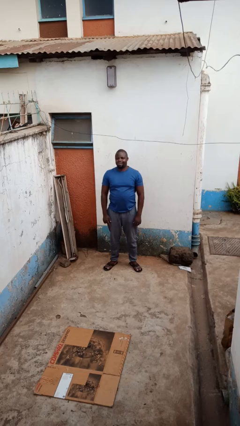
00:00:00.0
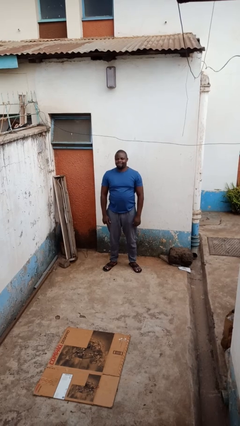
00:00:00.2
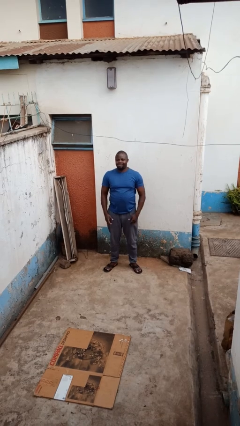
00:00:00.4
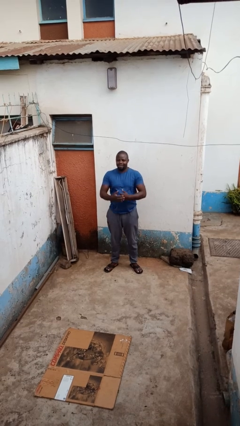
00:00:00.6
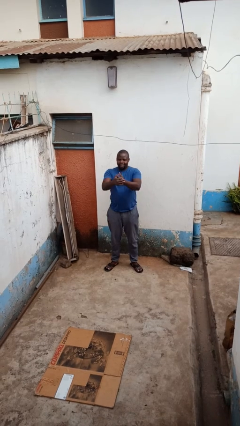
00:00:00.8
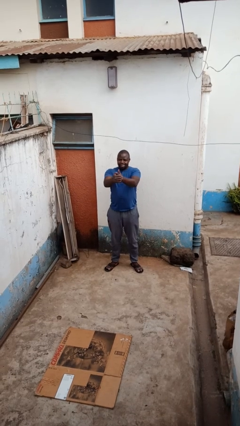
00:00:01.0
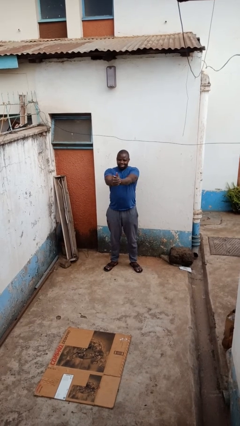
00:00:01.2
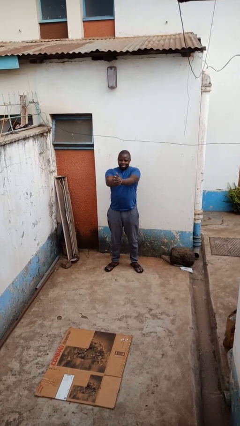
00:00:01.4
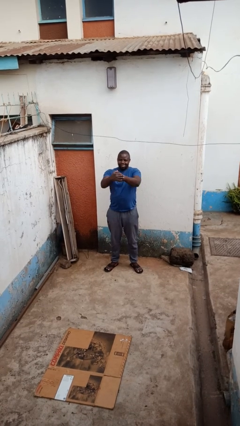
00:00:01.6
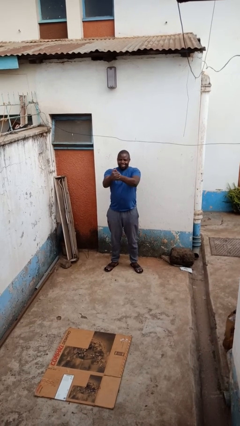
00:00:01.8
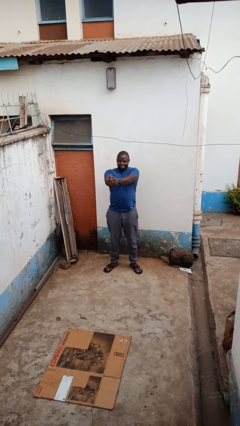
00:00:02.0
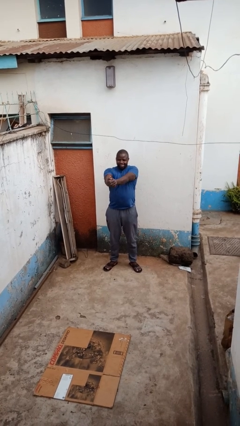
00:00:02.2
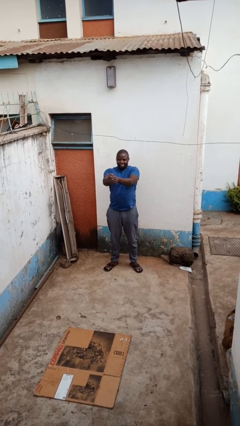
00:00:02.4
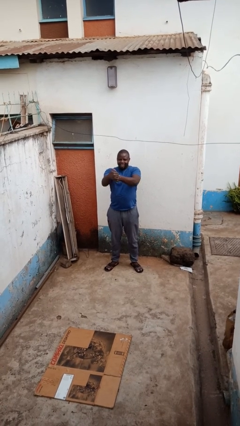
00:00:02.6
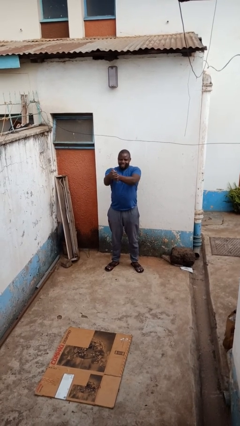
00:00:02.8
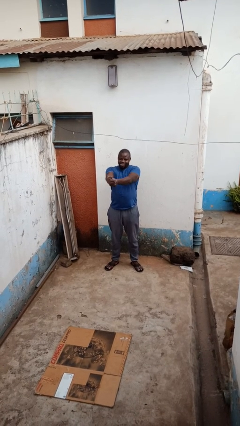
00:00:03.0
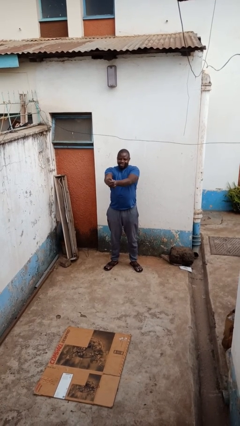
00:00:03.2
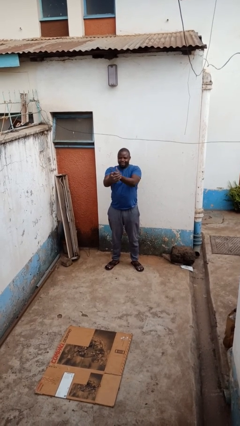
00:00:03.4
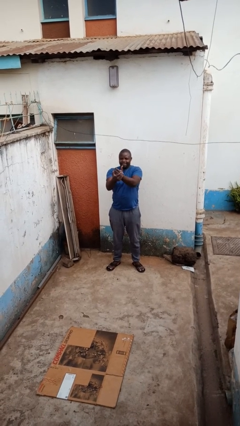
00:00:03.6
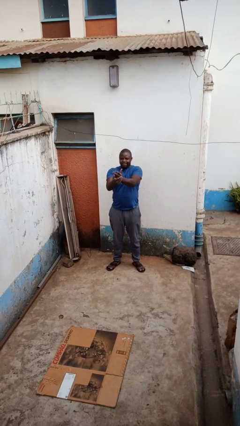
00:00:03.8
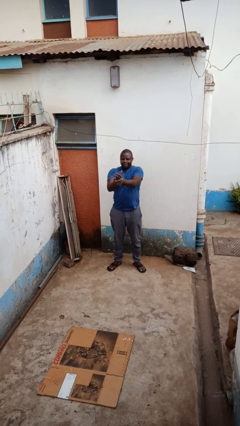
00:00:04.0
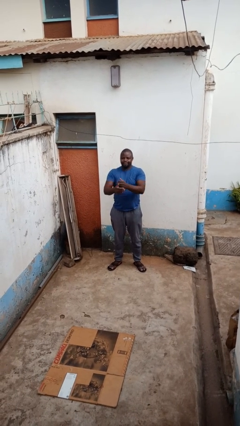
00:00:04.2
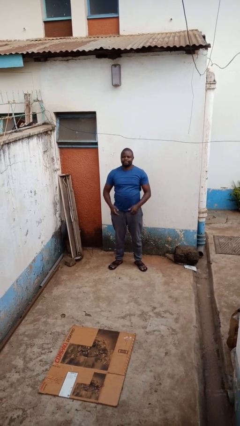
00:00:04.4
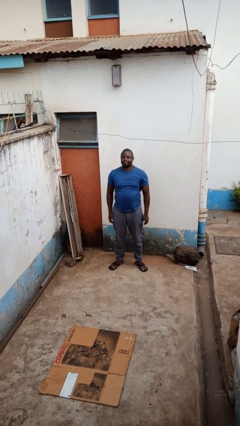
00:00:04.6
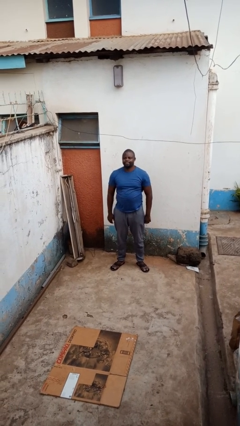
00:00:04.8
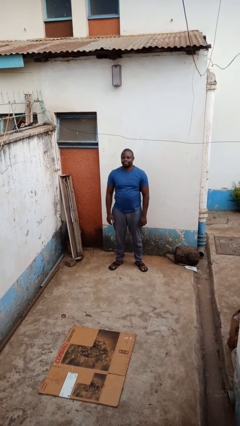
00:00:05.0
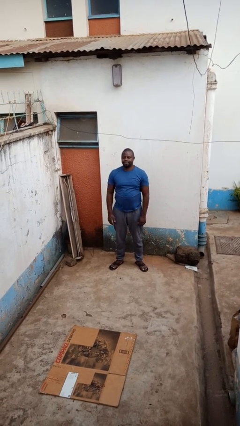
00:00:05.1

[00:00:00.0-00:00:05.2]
person cracks knuckles

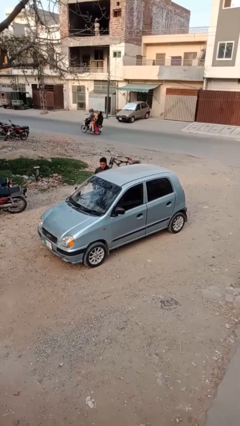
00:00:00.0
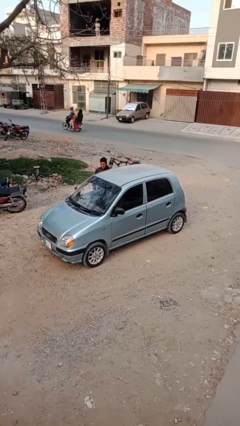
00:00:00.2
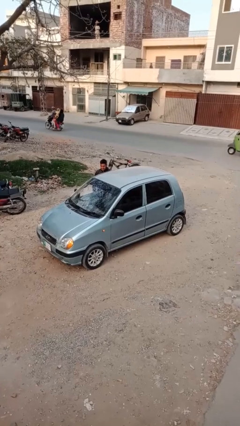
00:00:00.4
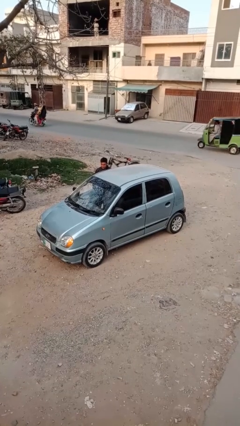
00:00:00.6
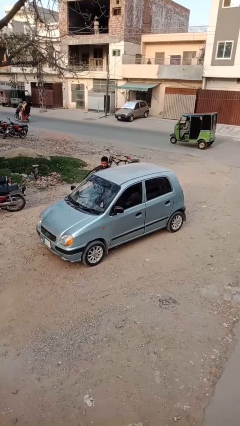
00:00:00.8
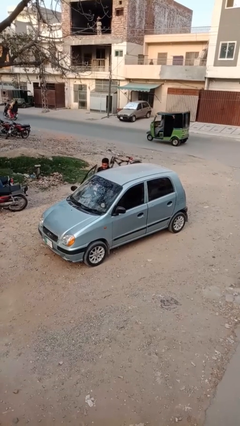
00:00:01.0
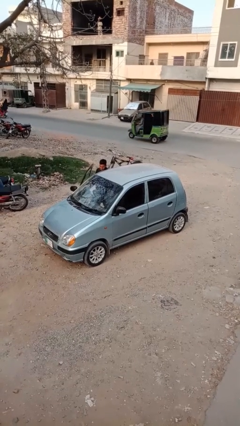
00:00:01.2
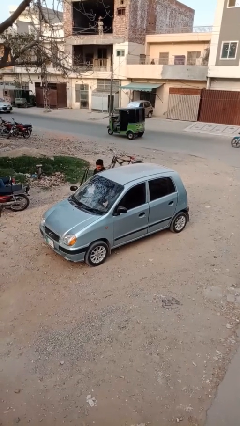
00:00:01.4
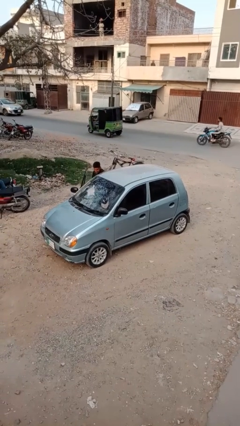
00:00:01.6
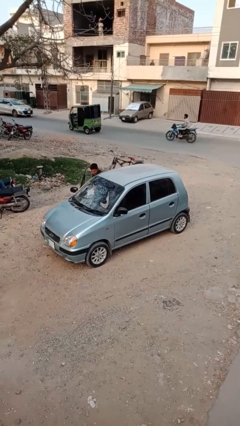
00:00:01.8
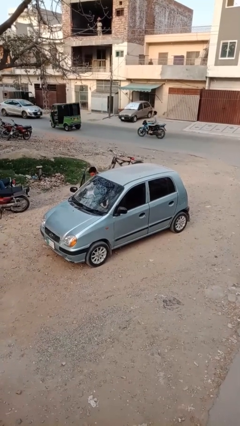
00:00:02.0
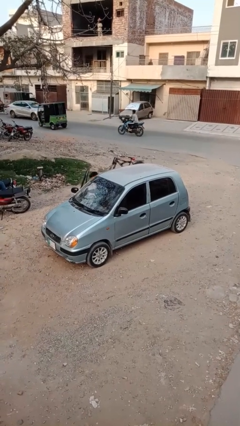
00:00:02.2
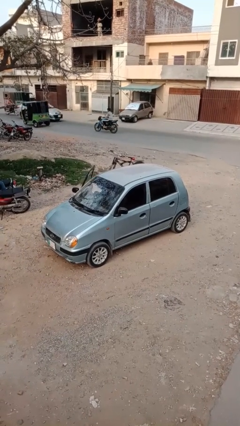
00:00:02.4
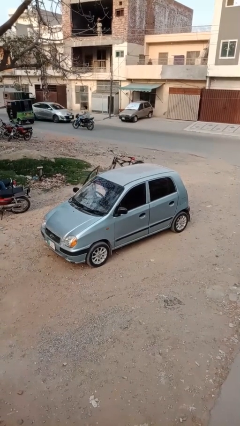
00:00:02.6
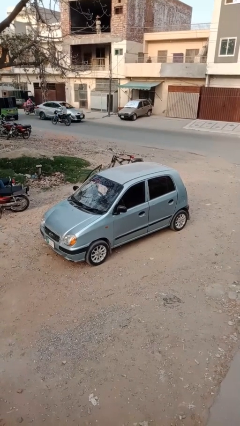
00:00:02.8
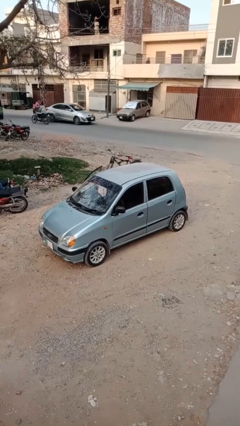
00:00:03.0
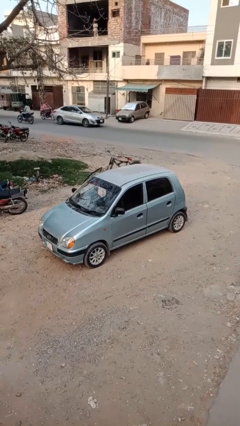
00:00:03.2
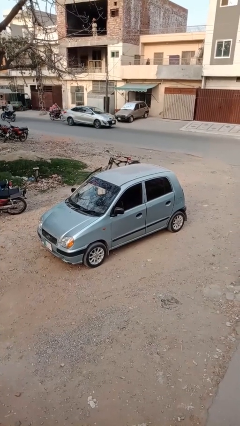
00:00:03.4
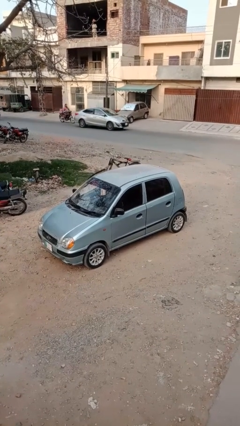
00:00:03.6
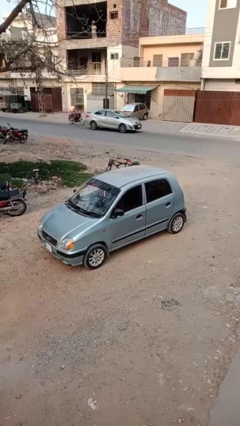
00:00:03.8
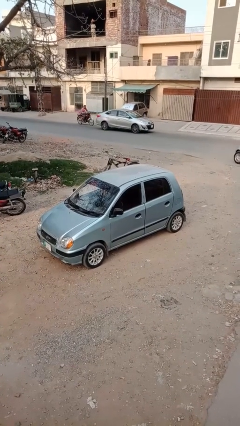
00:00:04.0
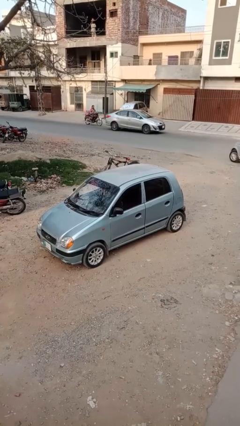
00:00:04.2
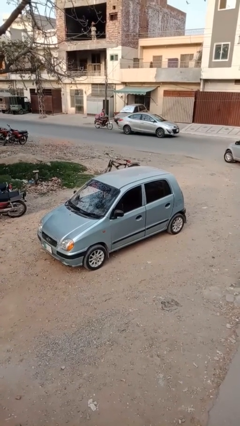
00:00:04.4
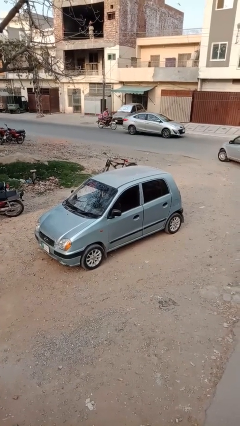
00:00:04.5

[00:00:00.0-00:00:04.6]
car picks up person

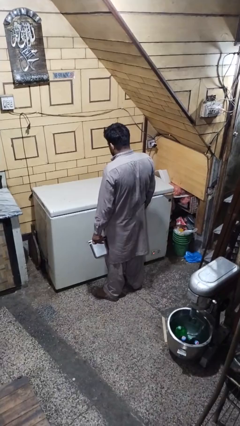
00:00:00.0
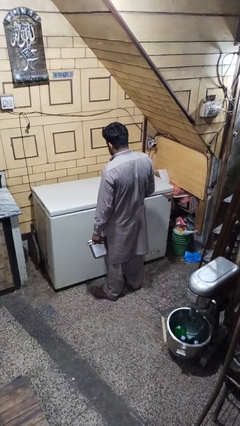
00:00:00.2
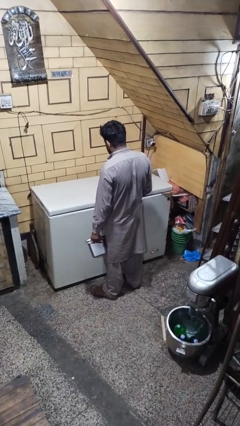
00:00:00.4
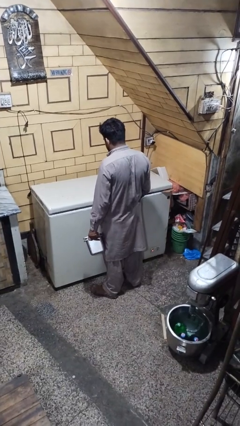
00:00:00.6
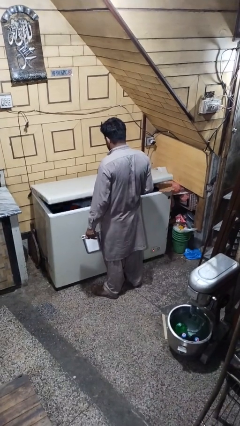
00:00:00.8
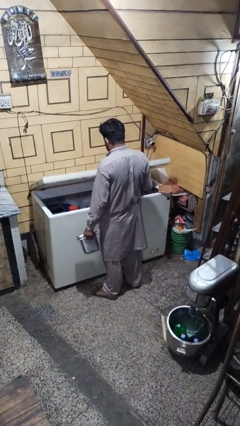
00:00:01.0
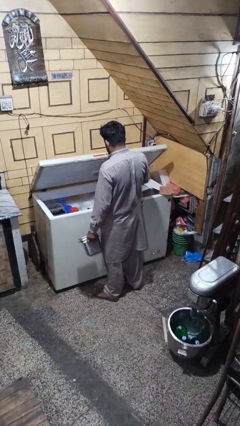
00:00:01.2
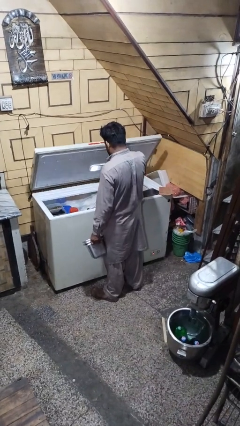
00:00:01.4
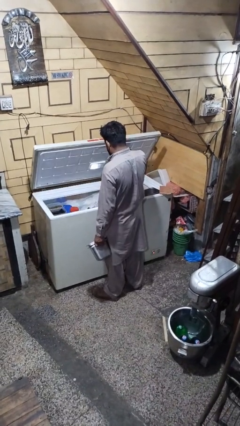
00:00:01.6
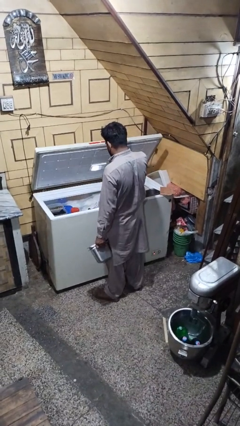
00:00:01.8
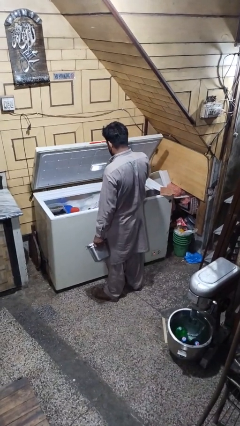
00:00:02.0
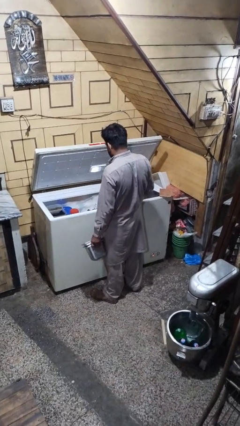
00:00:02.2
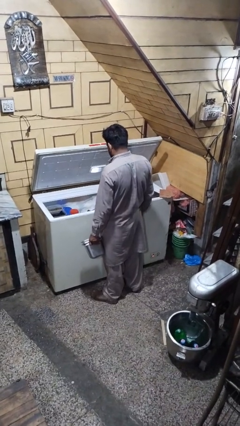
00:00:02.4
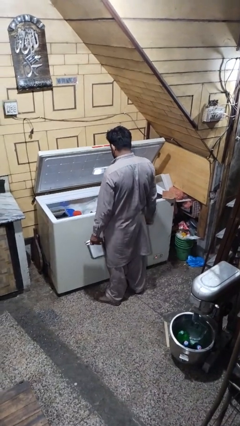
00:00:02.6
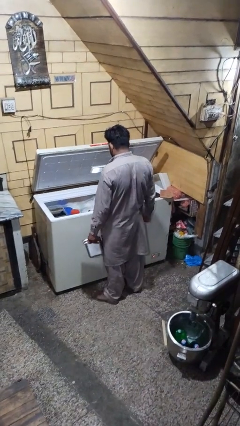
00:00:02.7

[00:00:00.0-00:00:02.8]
person opens refrigerator

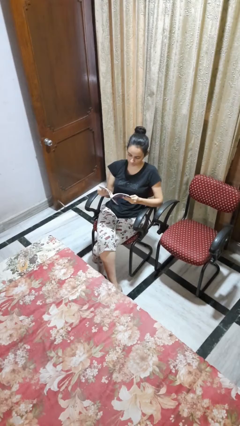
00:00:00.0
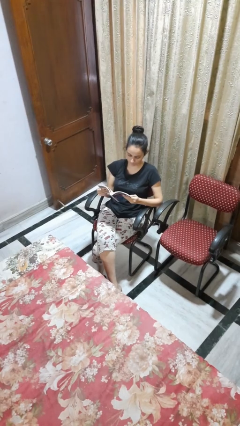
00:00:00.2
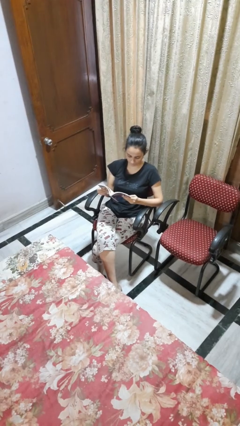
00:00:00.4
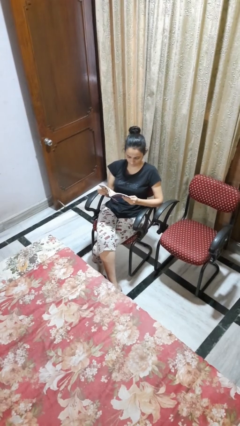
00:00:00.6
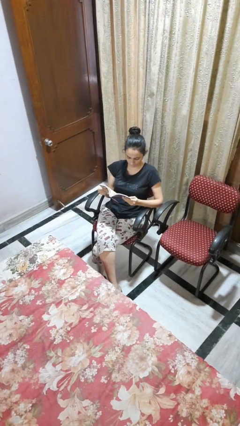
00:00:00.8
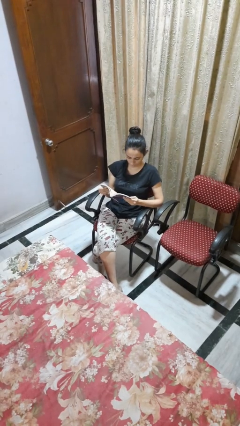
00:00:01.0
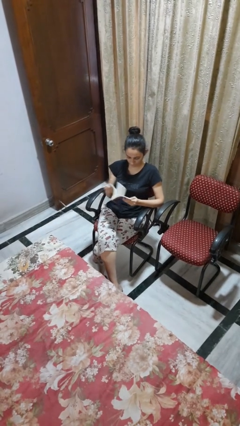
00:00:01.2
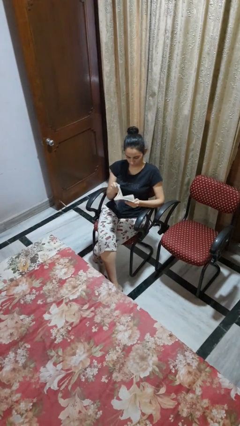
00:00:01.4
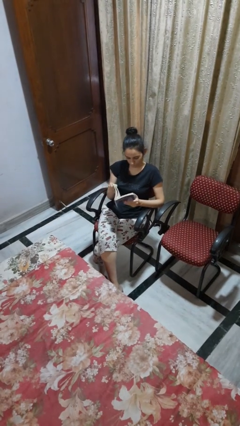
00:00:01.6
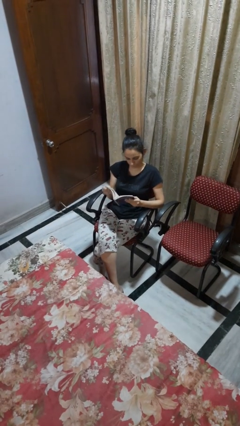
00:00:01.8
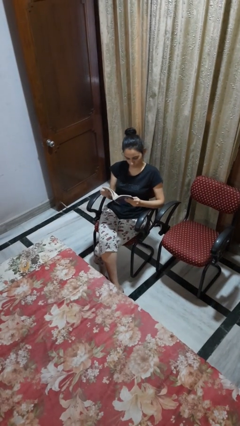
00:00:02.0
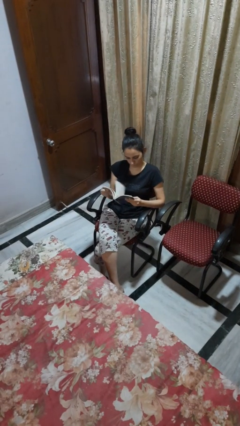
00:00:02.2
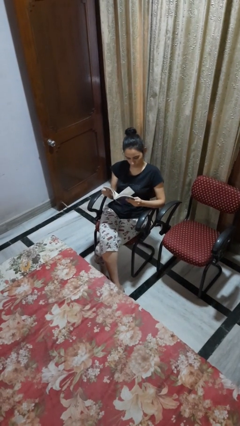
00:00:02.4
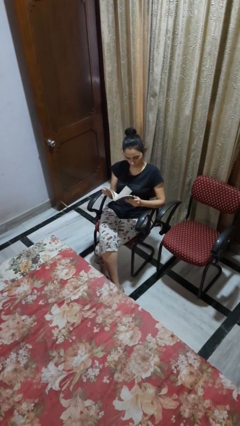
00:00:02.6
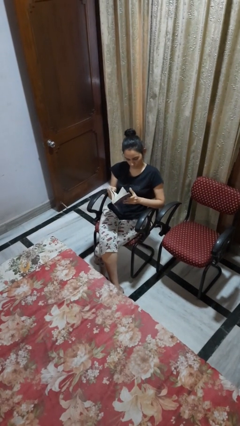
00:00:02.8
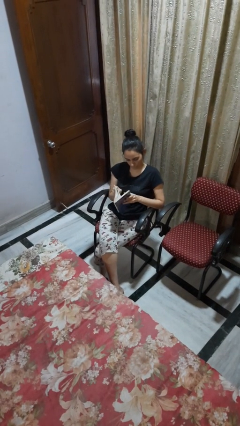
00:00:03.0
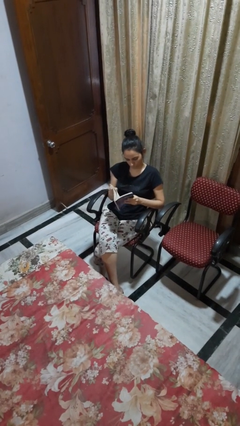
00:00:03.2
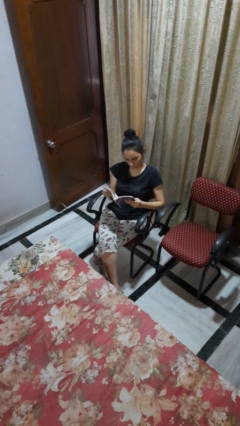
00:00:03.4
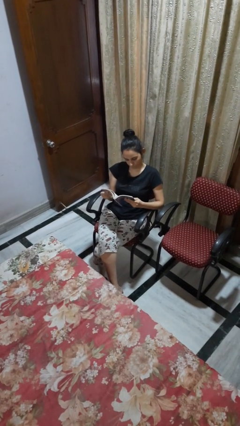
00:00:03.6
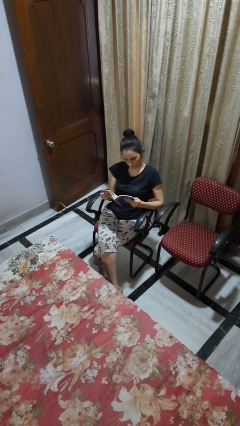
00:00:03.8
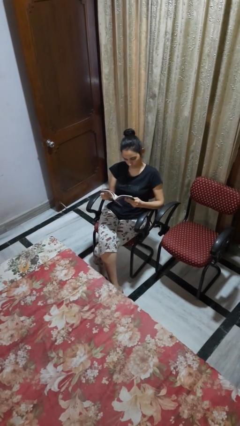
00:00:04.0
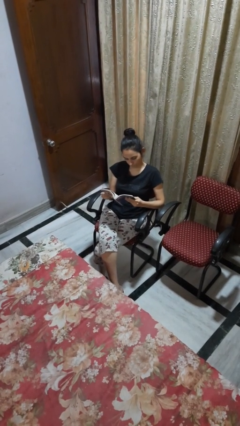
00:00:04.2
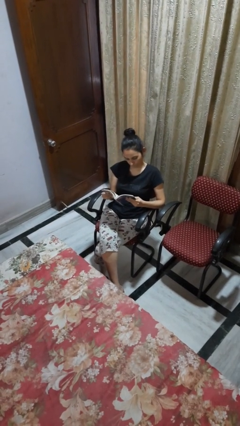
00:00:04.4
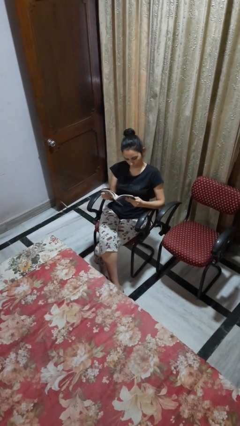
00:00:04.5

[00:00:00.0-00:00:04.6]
person reads book

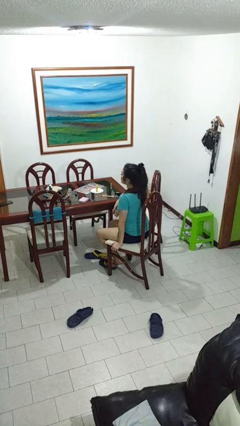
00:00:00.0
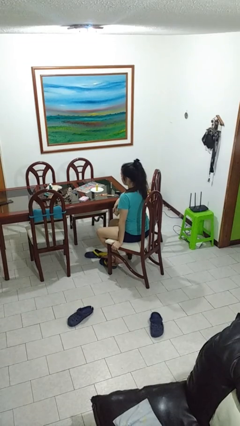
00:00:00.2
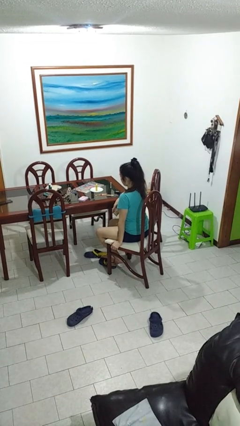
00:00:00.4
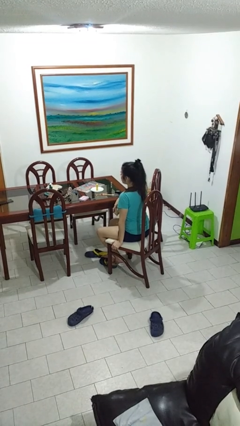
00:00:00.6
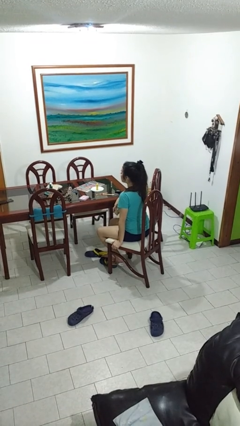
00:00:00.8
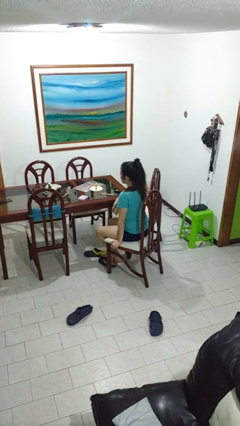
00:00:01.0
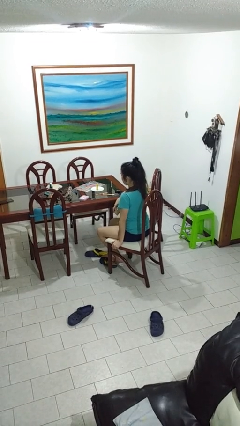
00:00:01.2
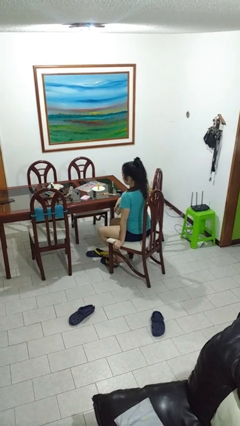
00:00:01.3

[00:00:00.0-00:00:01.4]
person nods head
